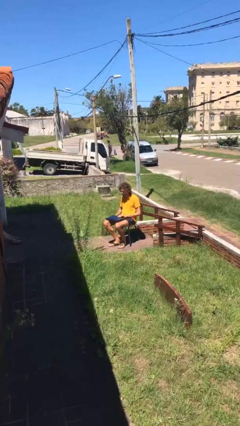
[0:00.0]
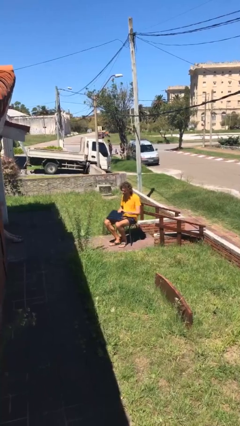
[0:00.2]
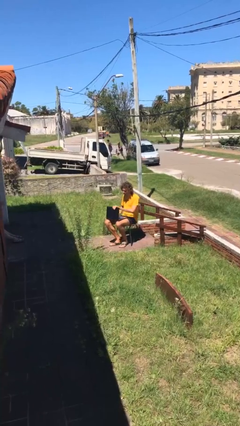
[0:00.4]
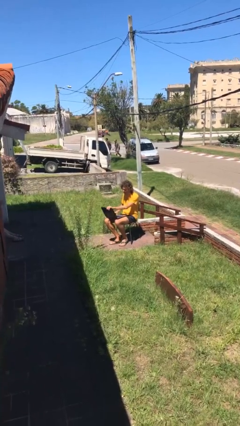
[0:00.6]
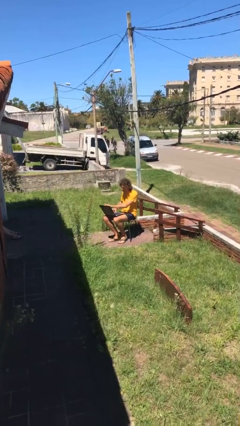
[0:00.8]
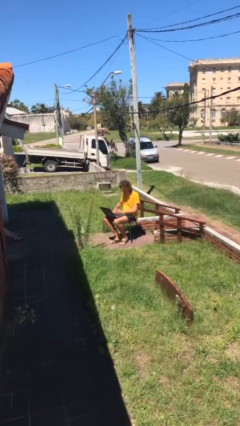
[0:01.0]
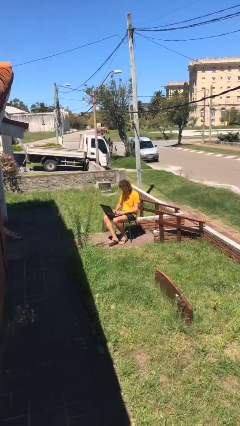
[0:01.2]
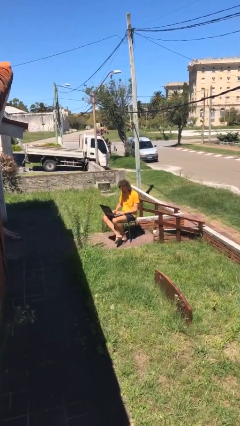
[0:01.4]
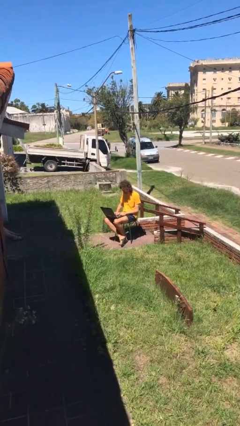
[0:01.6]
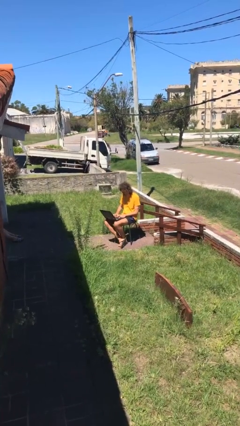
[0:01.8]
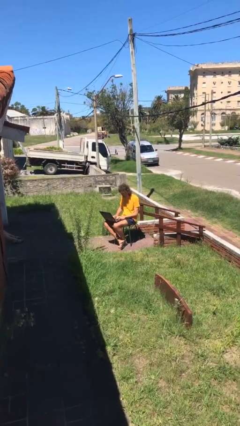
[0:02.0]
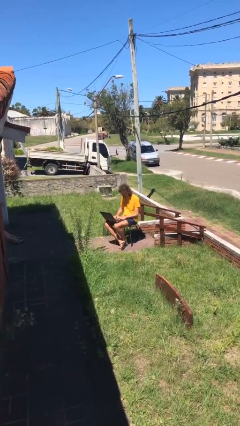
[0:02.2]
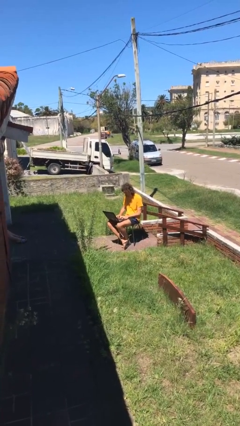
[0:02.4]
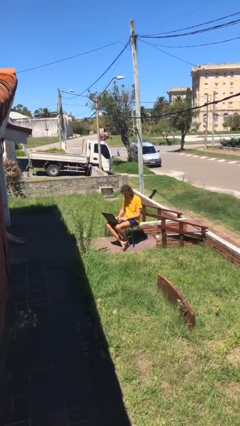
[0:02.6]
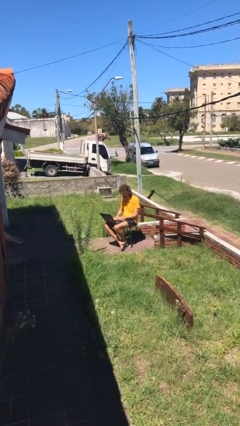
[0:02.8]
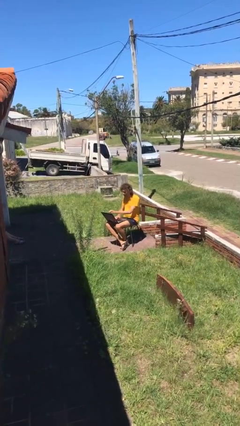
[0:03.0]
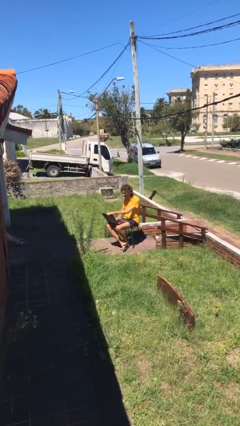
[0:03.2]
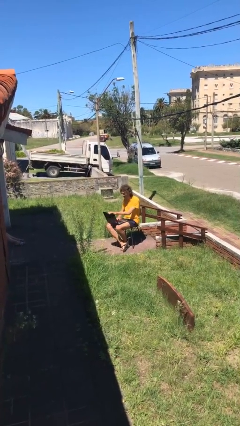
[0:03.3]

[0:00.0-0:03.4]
person interacts with laptop

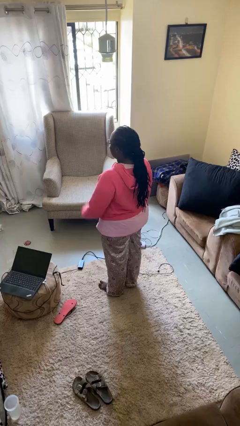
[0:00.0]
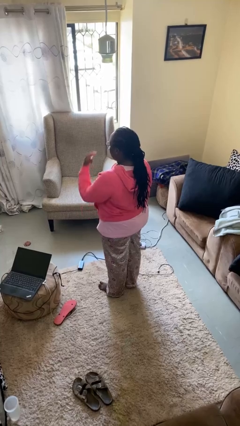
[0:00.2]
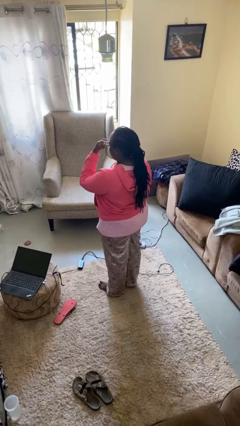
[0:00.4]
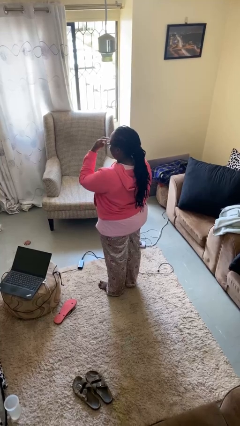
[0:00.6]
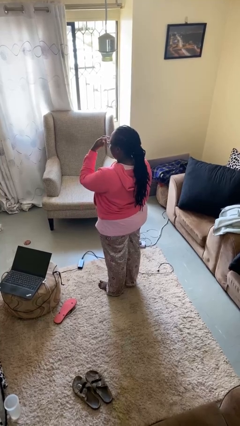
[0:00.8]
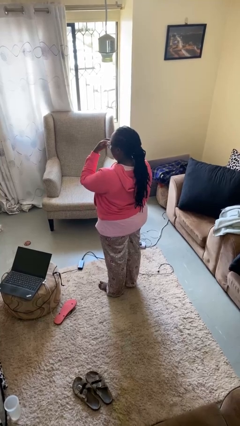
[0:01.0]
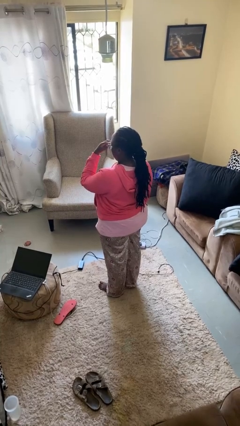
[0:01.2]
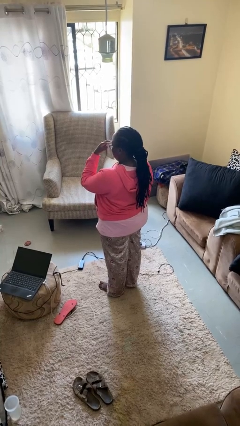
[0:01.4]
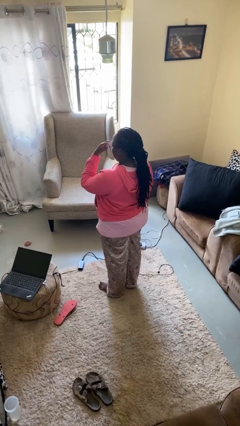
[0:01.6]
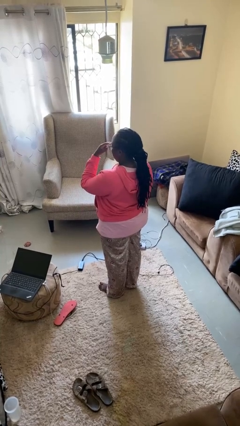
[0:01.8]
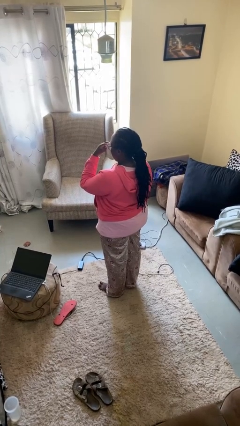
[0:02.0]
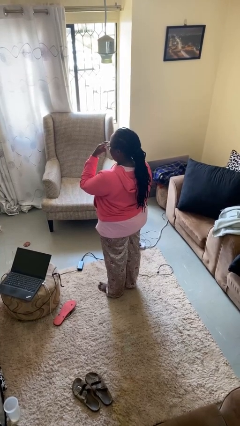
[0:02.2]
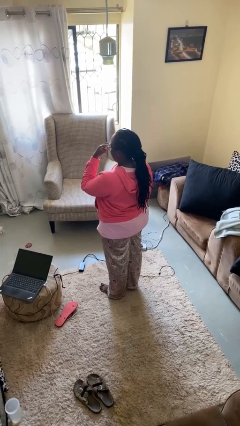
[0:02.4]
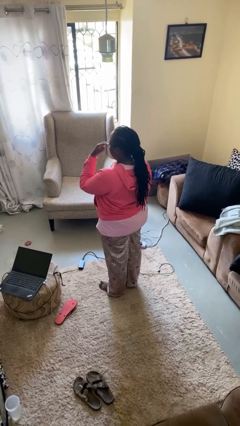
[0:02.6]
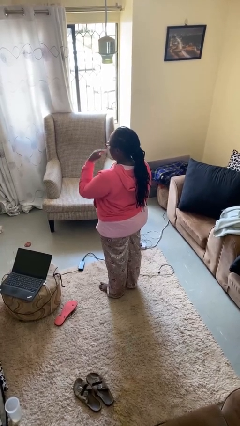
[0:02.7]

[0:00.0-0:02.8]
person gestures watch closely

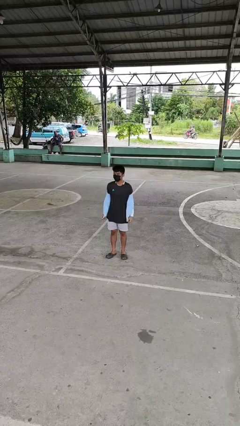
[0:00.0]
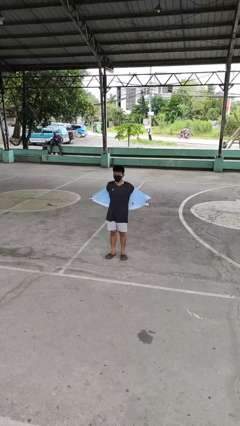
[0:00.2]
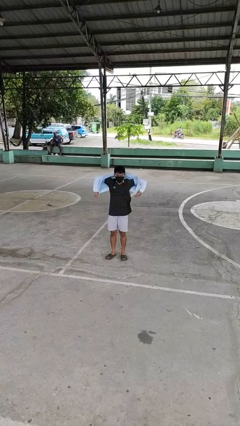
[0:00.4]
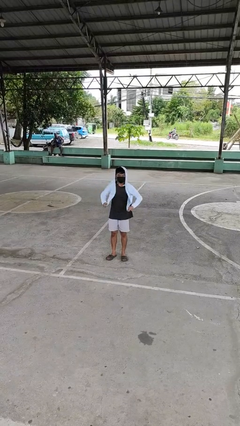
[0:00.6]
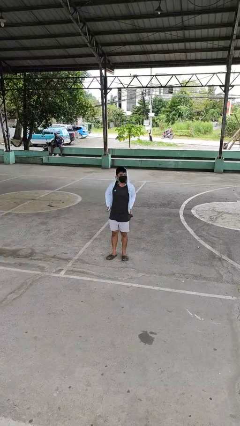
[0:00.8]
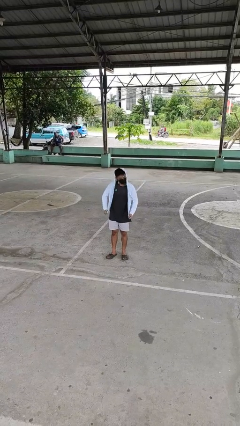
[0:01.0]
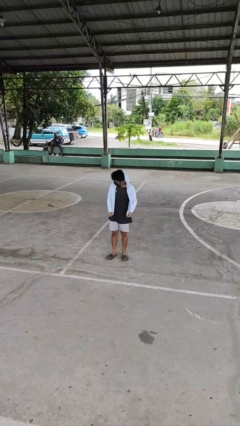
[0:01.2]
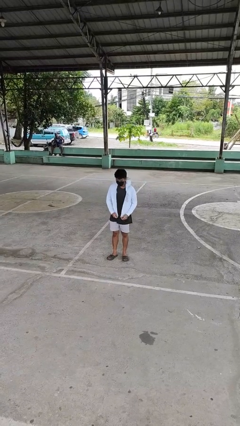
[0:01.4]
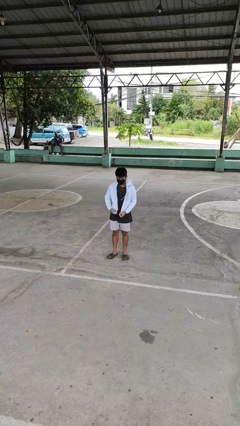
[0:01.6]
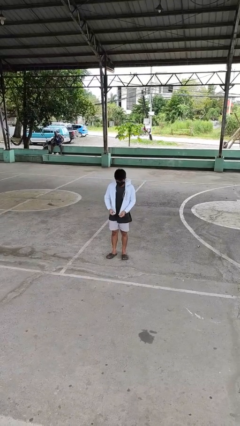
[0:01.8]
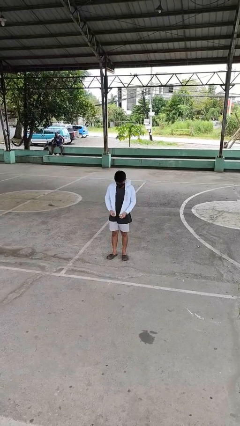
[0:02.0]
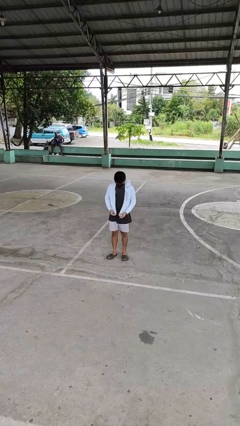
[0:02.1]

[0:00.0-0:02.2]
person puts on jacket

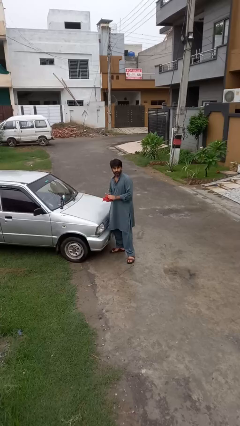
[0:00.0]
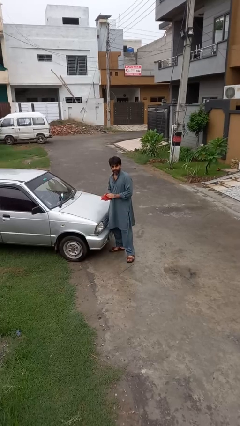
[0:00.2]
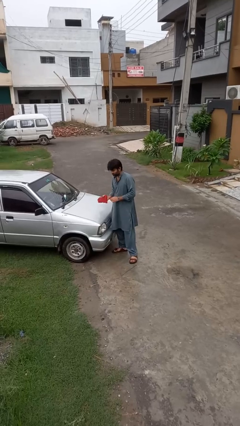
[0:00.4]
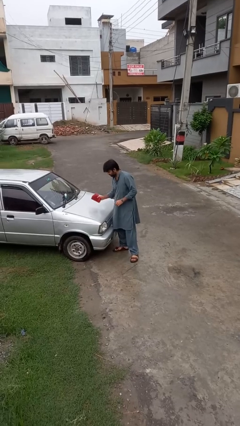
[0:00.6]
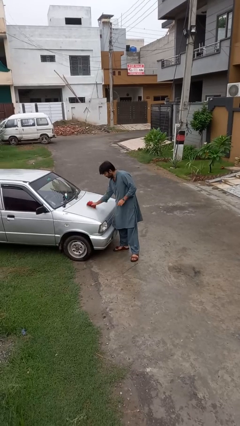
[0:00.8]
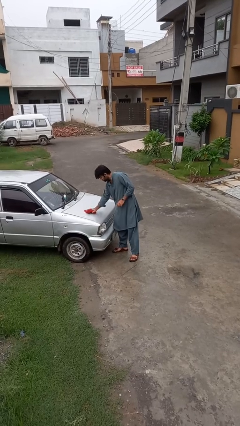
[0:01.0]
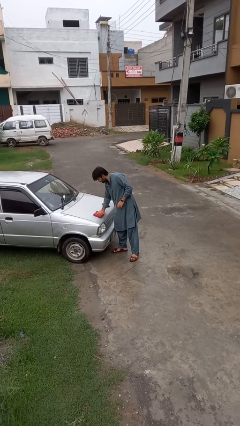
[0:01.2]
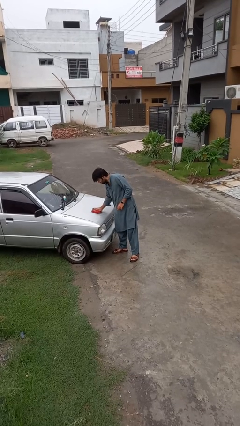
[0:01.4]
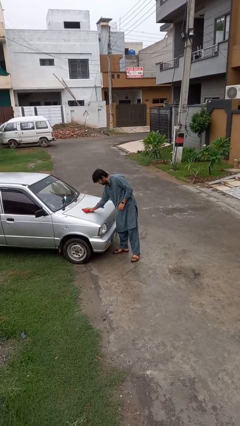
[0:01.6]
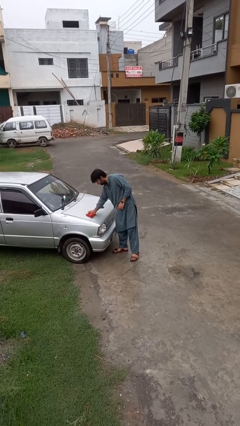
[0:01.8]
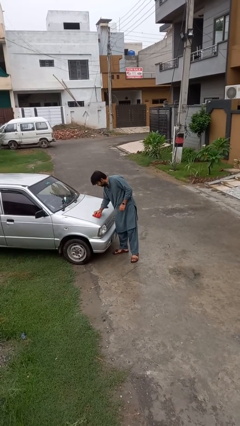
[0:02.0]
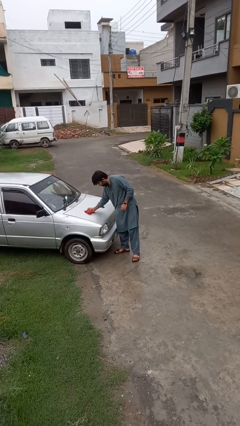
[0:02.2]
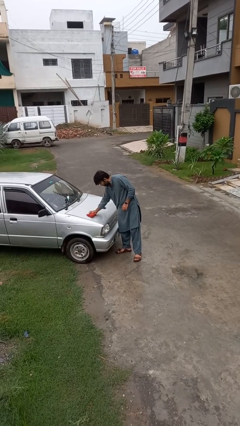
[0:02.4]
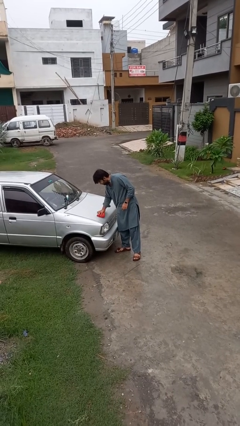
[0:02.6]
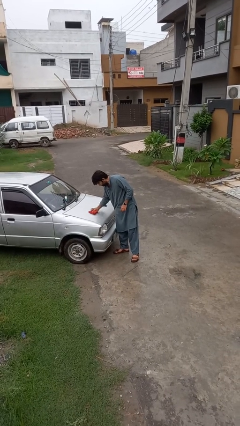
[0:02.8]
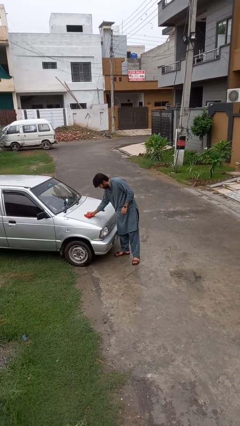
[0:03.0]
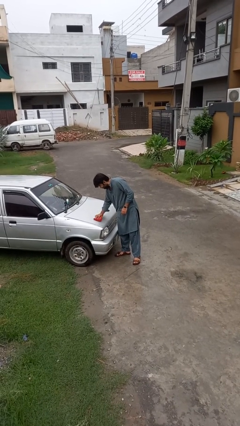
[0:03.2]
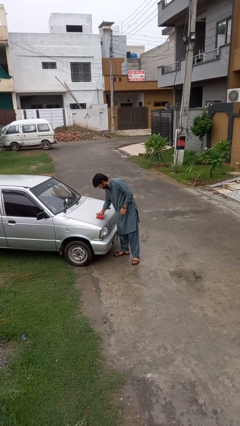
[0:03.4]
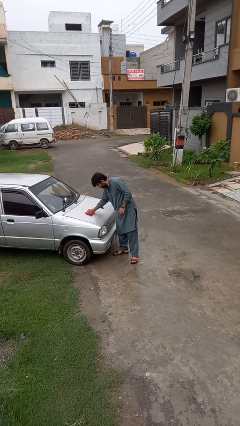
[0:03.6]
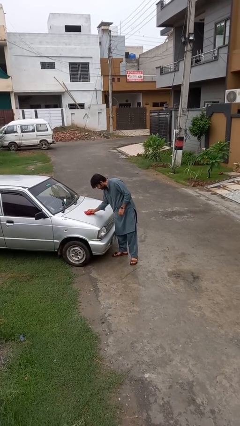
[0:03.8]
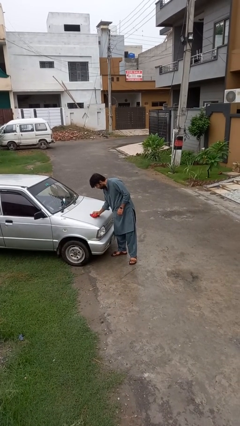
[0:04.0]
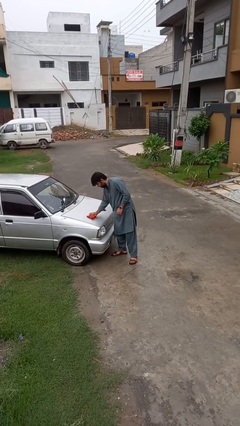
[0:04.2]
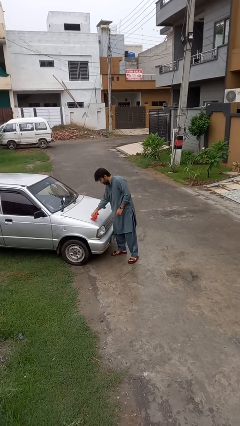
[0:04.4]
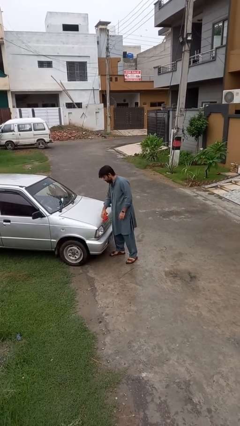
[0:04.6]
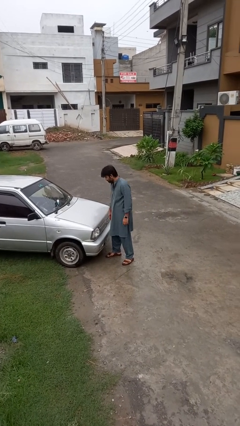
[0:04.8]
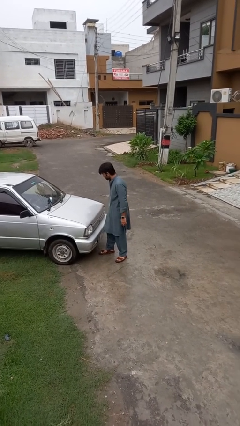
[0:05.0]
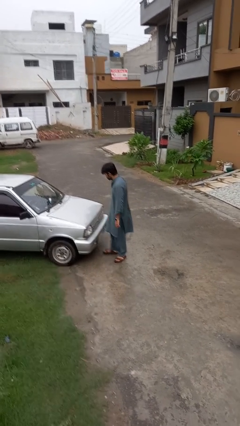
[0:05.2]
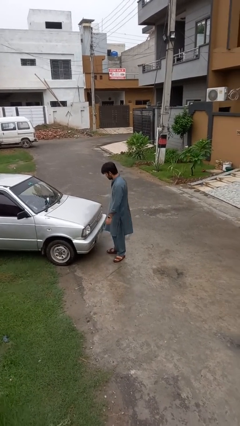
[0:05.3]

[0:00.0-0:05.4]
person polishes car with rag

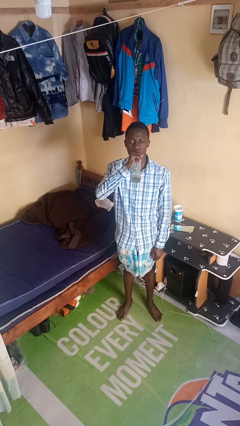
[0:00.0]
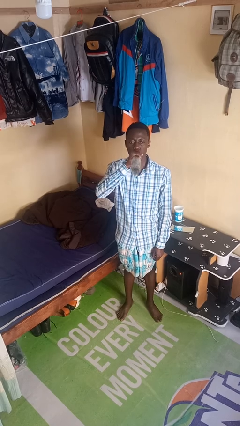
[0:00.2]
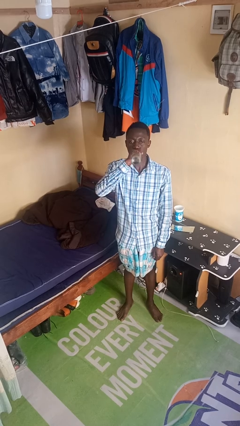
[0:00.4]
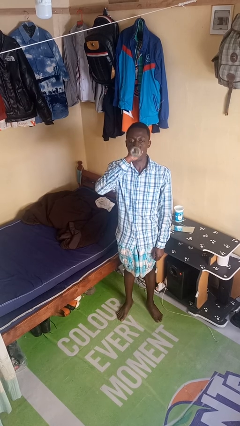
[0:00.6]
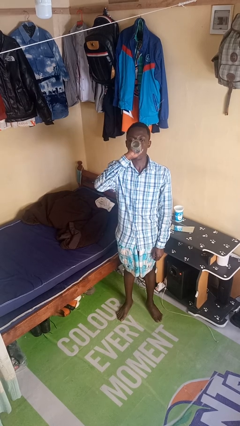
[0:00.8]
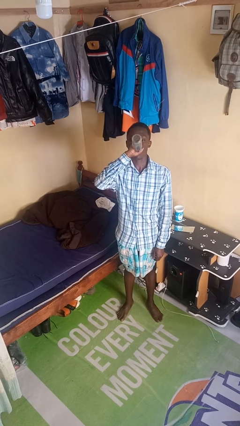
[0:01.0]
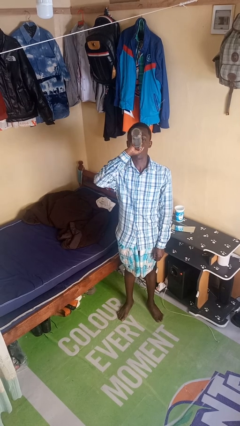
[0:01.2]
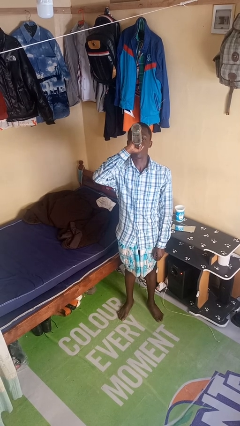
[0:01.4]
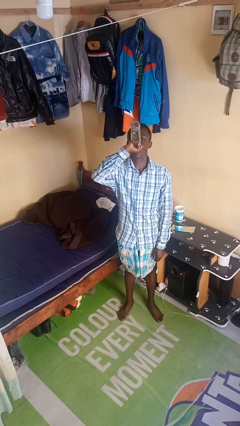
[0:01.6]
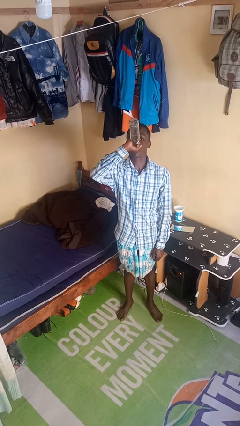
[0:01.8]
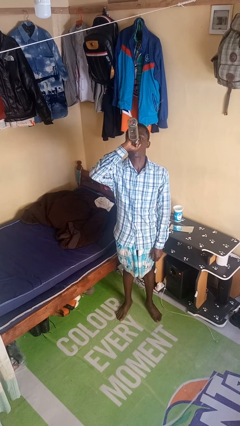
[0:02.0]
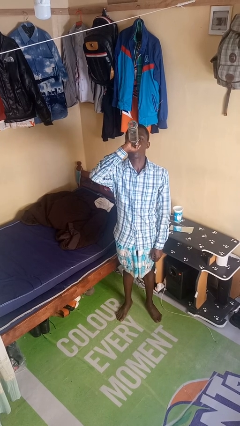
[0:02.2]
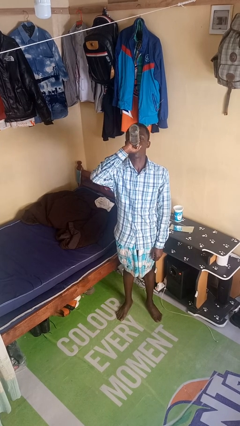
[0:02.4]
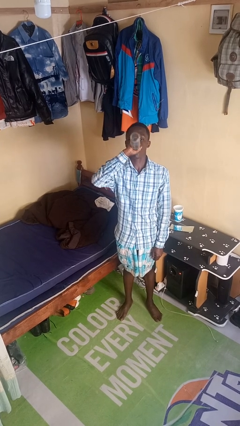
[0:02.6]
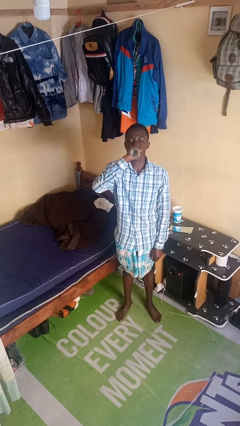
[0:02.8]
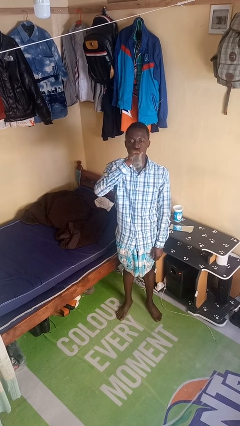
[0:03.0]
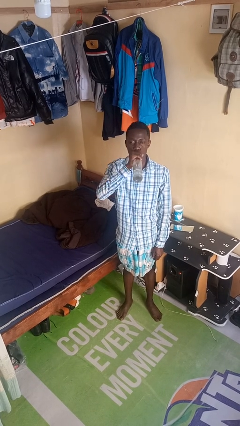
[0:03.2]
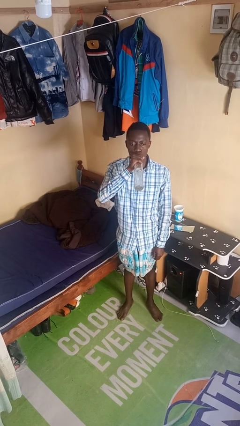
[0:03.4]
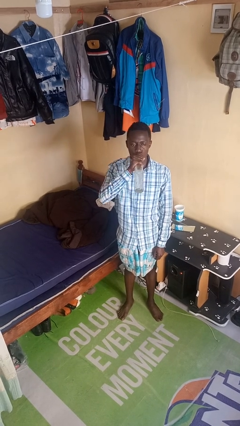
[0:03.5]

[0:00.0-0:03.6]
person drinks from bottle

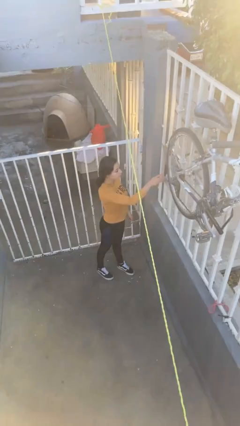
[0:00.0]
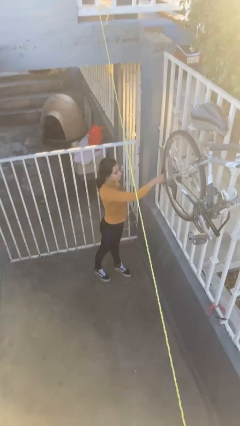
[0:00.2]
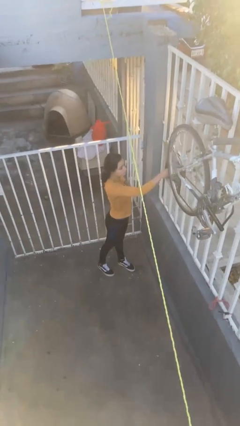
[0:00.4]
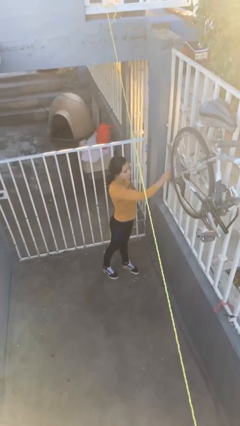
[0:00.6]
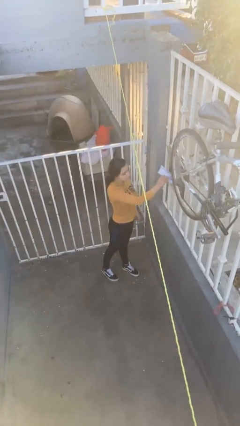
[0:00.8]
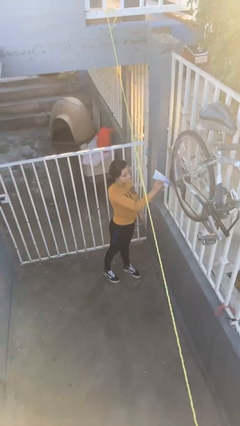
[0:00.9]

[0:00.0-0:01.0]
person takes letters from mailbox
